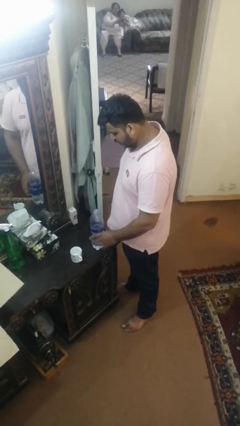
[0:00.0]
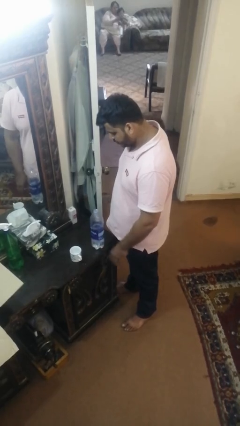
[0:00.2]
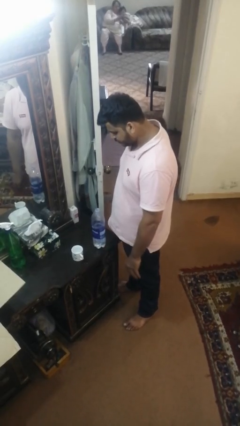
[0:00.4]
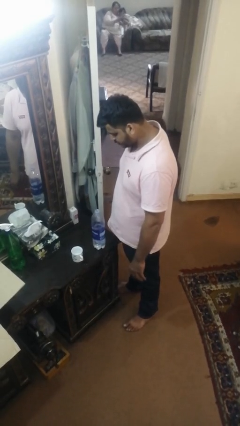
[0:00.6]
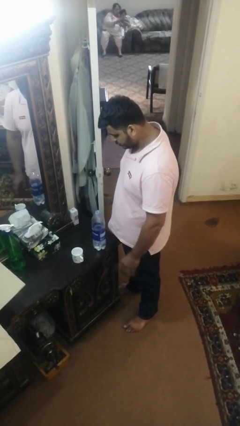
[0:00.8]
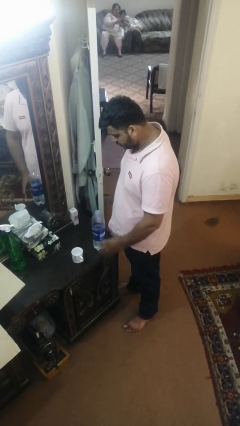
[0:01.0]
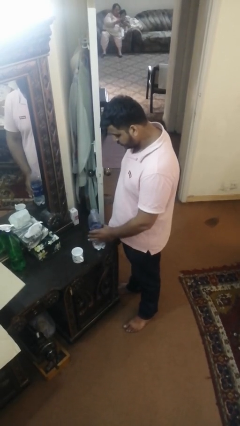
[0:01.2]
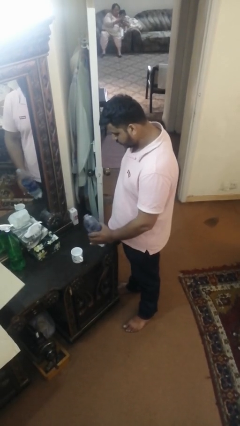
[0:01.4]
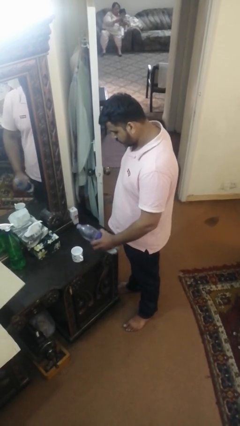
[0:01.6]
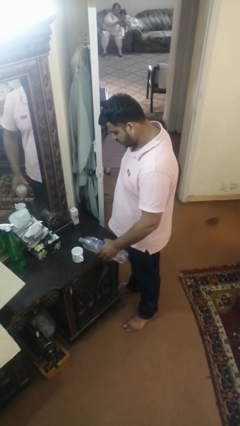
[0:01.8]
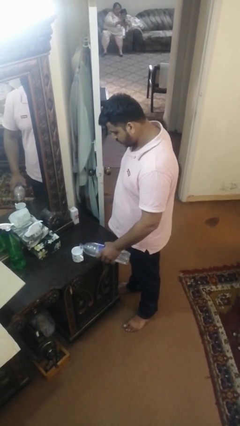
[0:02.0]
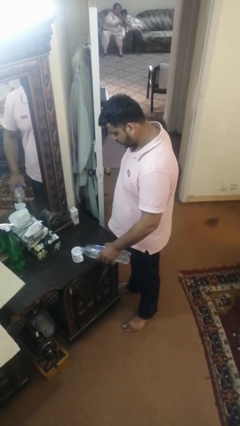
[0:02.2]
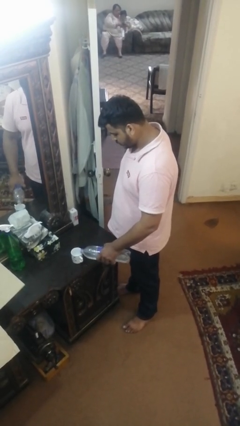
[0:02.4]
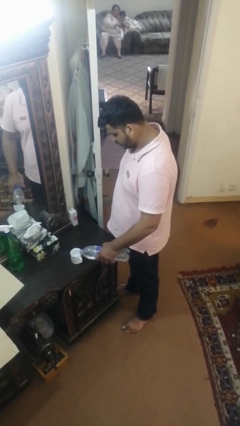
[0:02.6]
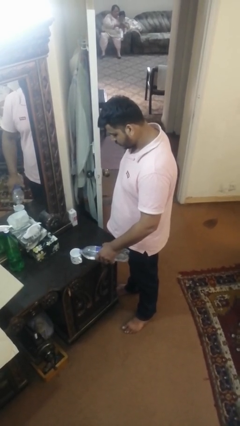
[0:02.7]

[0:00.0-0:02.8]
person pours liquid into cup

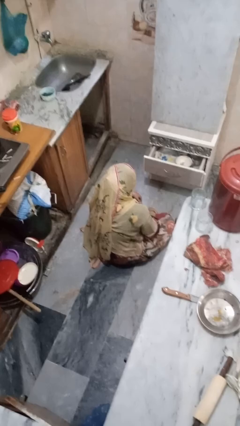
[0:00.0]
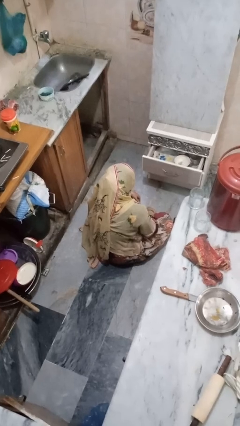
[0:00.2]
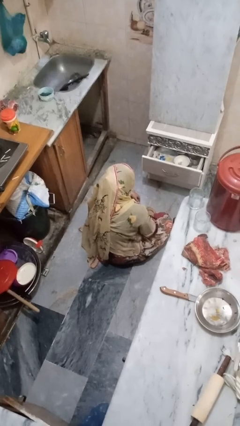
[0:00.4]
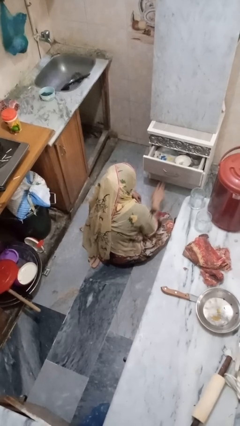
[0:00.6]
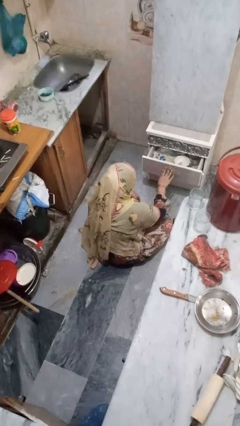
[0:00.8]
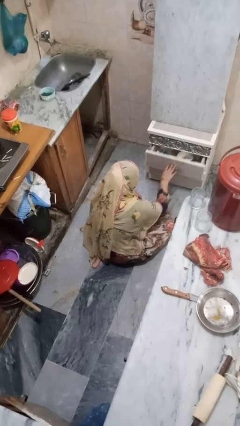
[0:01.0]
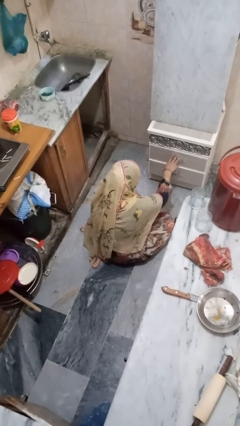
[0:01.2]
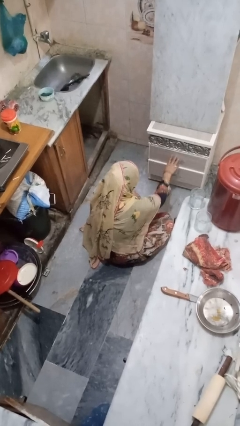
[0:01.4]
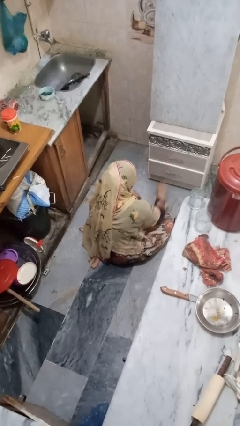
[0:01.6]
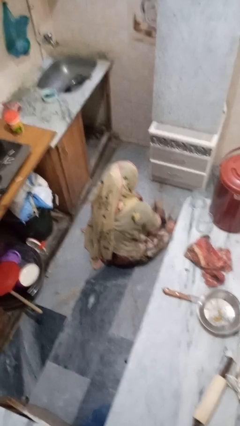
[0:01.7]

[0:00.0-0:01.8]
person closes kitchen drawer

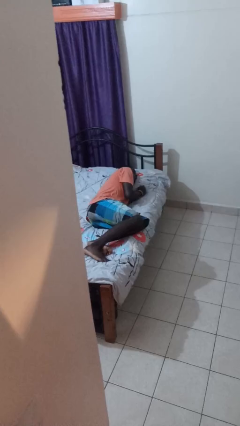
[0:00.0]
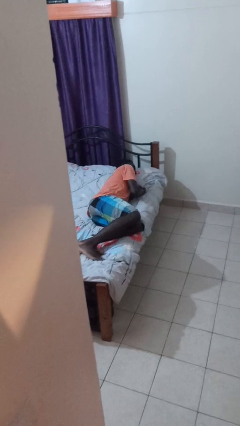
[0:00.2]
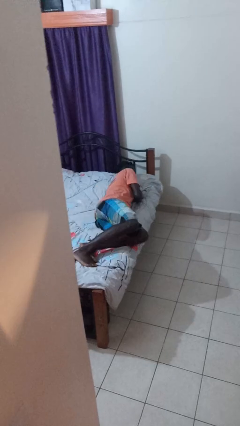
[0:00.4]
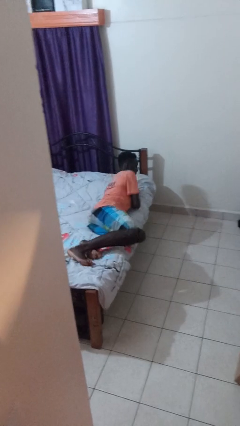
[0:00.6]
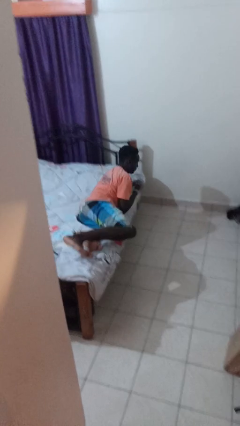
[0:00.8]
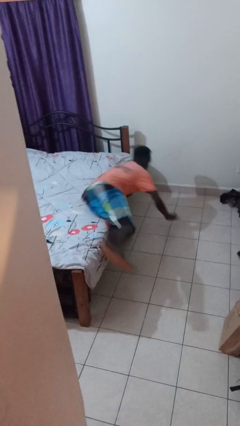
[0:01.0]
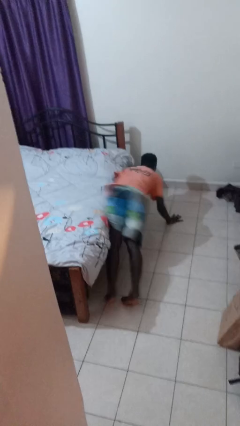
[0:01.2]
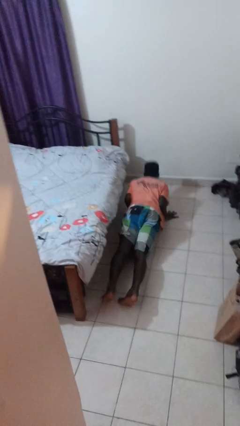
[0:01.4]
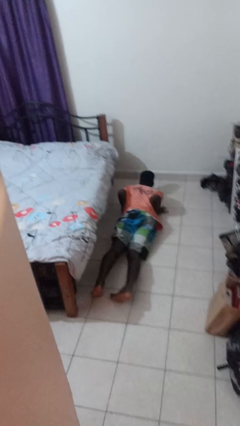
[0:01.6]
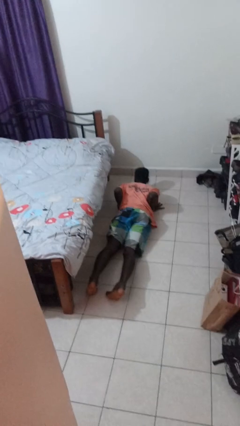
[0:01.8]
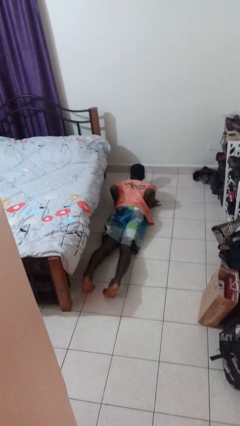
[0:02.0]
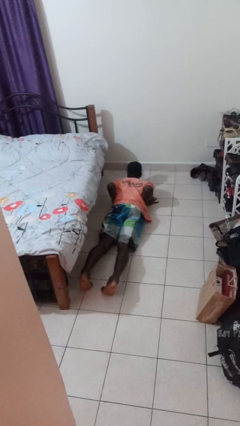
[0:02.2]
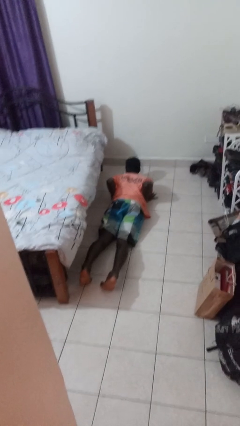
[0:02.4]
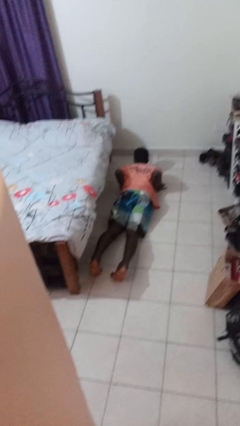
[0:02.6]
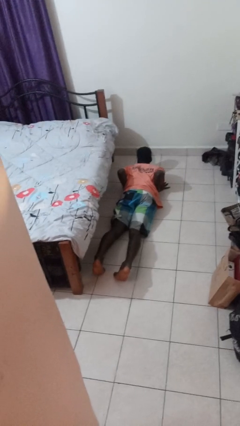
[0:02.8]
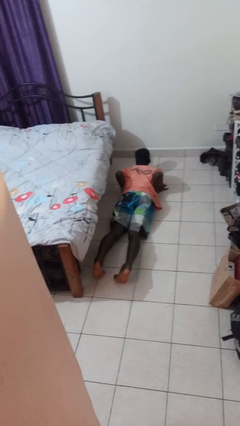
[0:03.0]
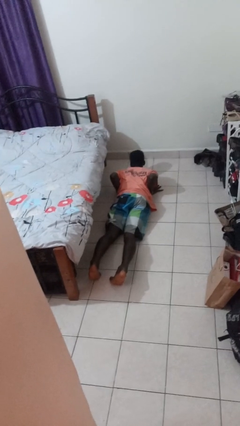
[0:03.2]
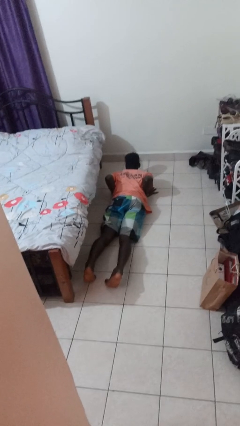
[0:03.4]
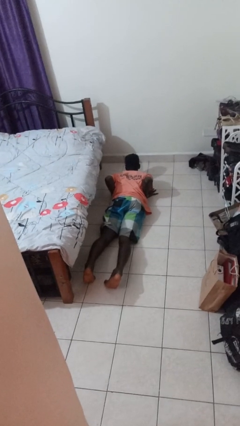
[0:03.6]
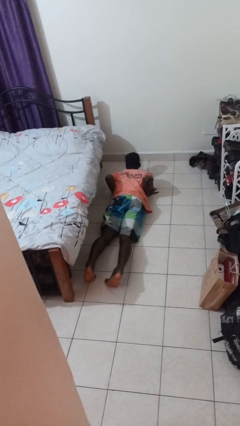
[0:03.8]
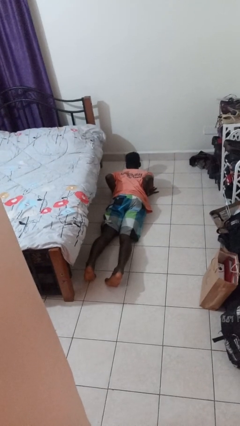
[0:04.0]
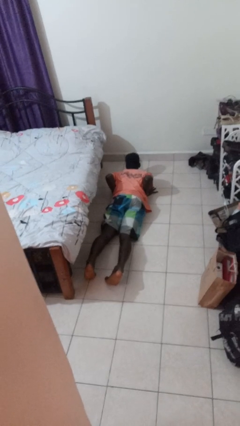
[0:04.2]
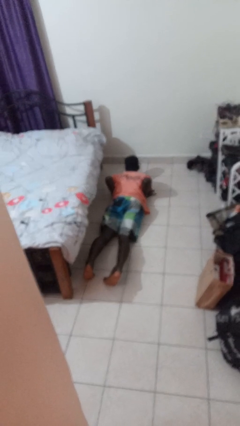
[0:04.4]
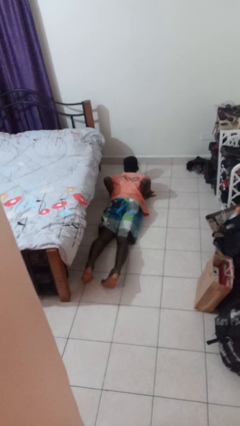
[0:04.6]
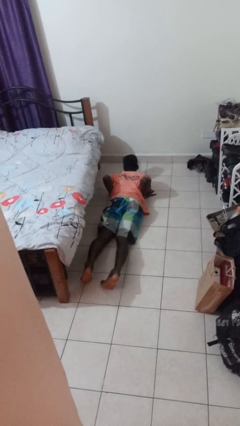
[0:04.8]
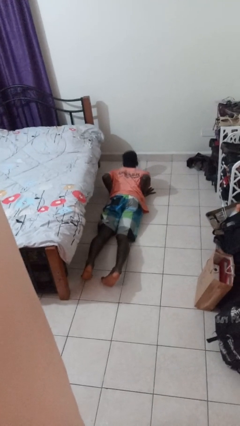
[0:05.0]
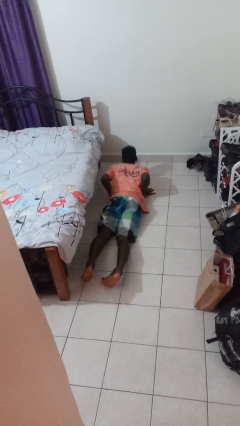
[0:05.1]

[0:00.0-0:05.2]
person falls from bed

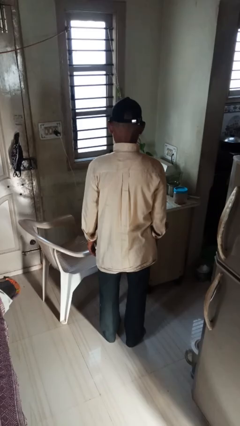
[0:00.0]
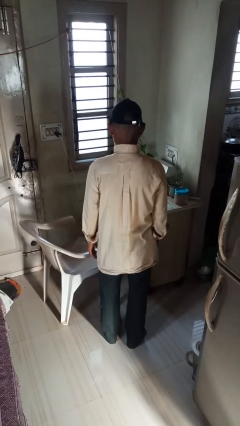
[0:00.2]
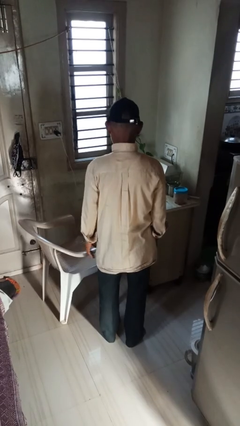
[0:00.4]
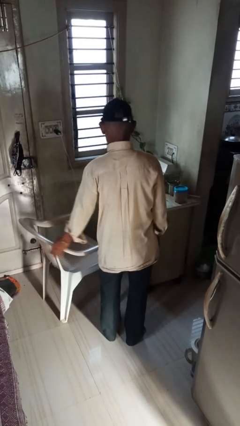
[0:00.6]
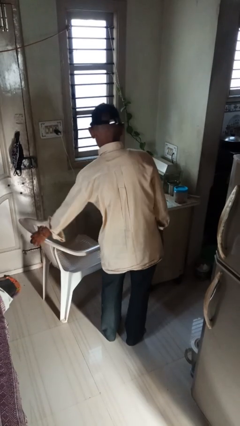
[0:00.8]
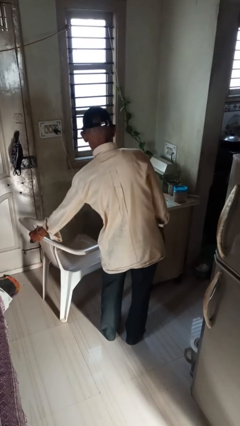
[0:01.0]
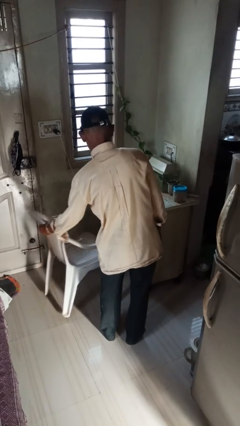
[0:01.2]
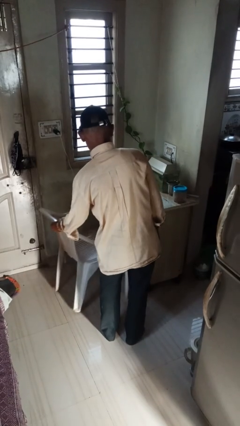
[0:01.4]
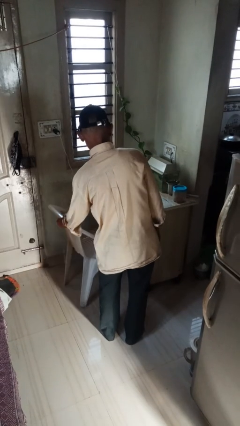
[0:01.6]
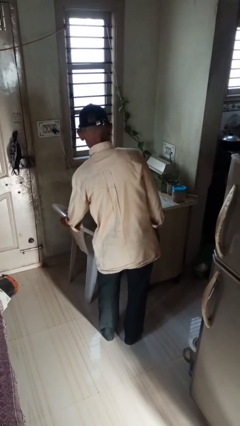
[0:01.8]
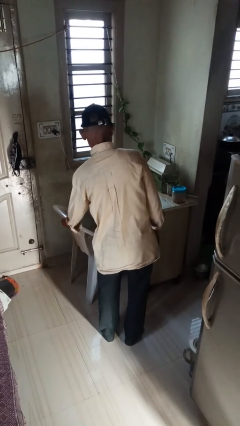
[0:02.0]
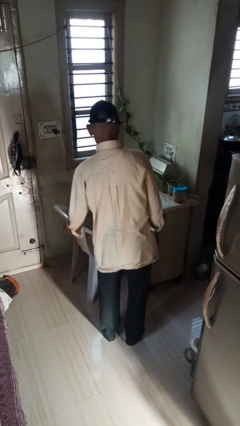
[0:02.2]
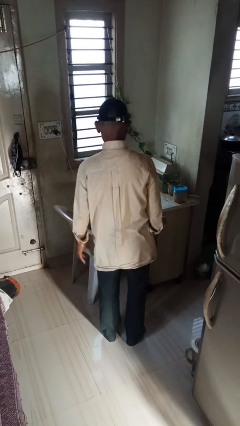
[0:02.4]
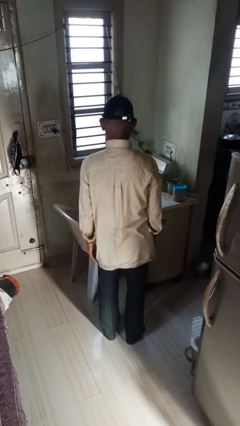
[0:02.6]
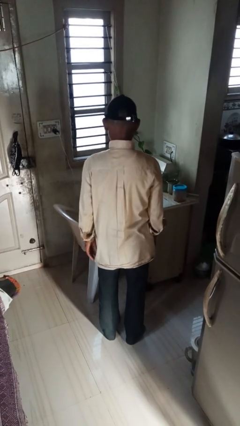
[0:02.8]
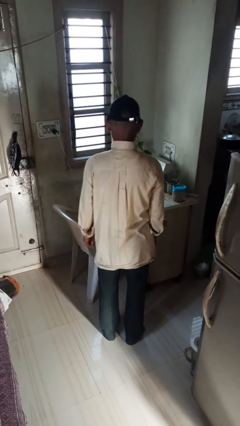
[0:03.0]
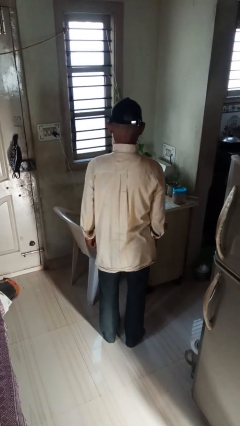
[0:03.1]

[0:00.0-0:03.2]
person pushes in chair

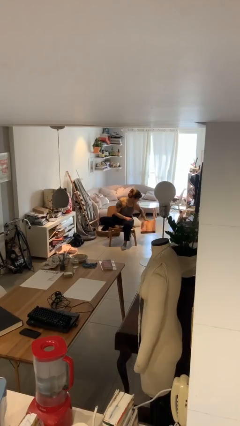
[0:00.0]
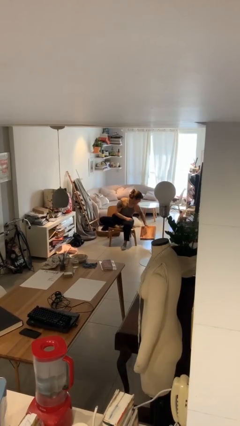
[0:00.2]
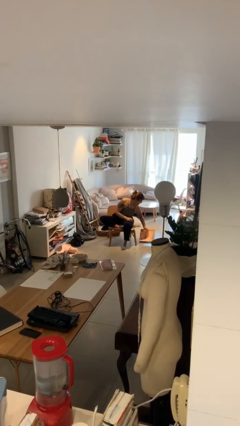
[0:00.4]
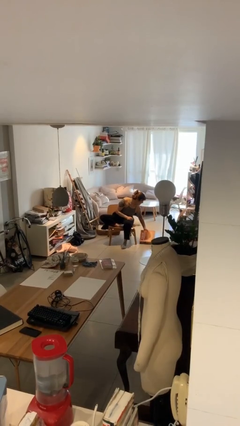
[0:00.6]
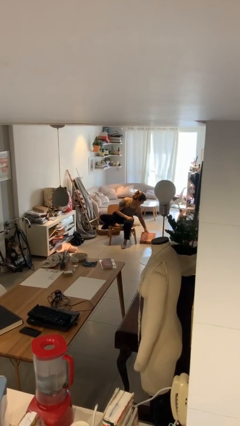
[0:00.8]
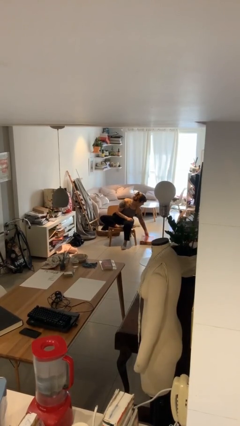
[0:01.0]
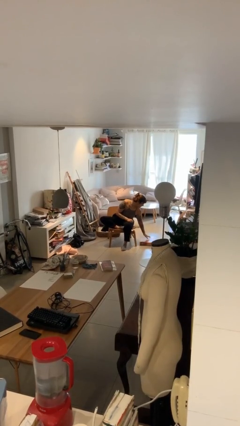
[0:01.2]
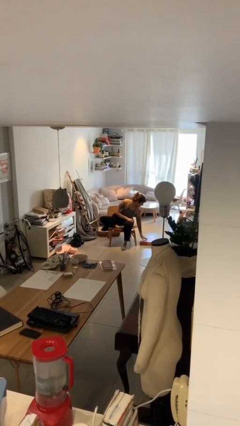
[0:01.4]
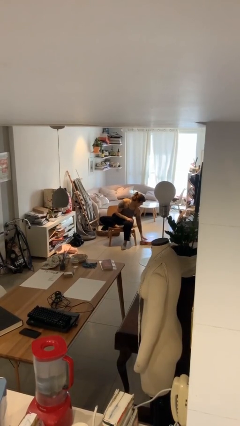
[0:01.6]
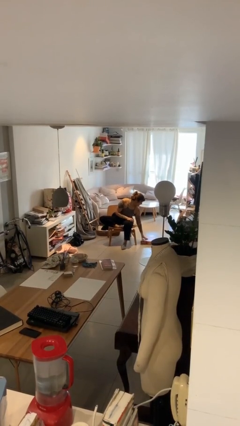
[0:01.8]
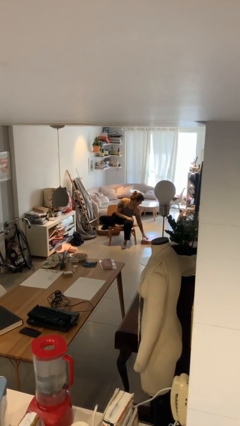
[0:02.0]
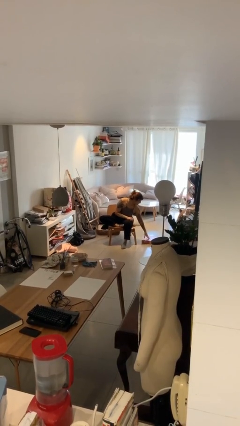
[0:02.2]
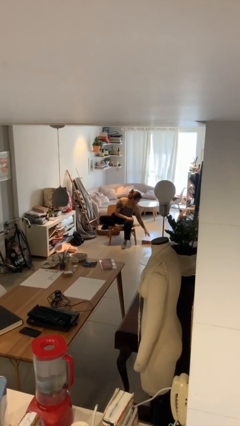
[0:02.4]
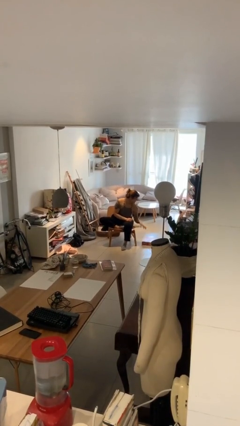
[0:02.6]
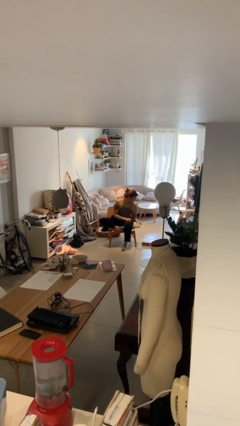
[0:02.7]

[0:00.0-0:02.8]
person puts down object on floor

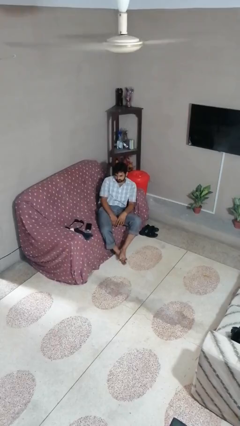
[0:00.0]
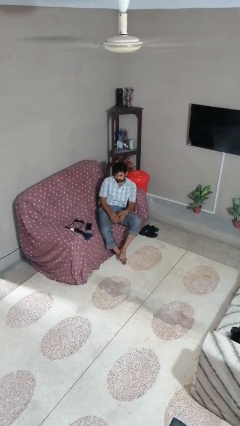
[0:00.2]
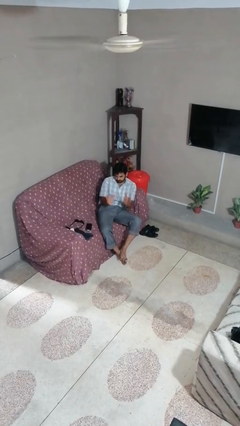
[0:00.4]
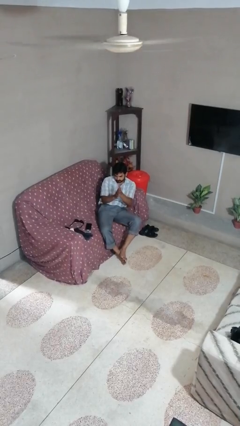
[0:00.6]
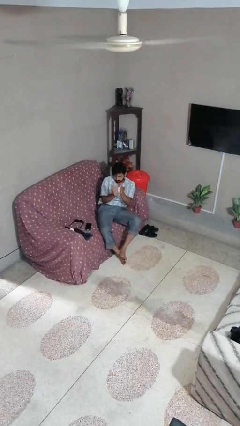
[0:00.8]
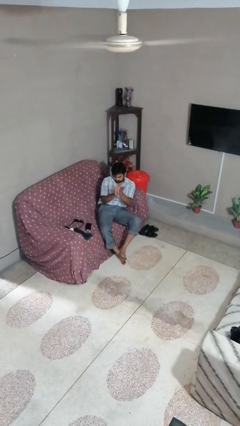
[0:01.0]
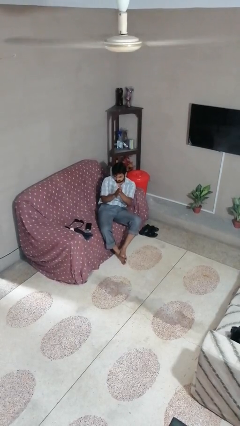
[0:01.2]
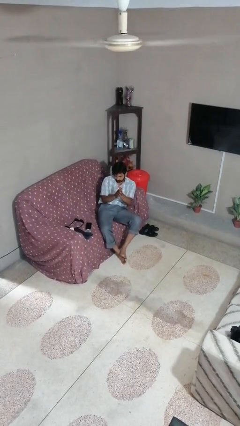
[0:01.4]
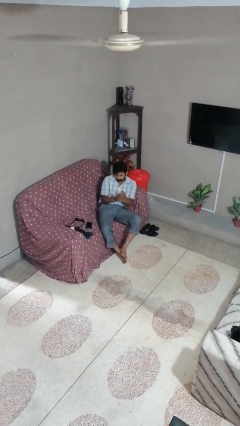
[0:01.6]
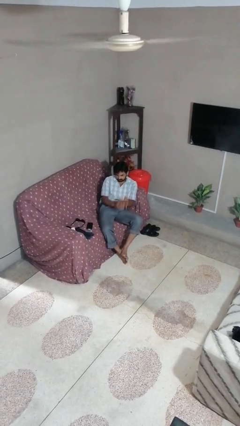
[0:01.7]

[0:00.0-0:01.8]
person claps hands
